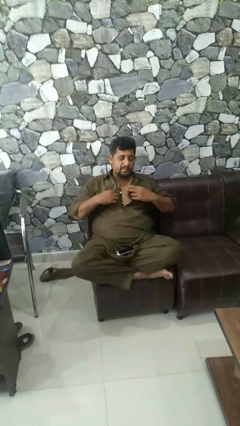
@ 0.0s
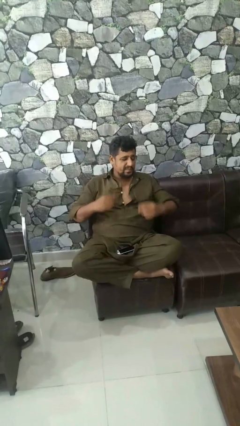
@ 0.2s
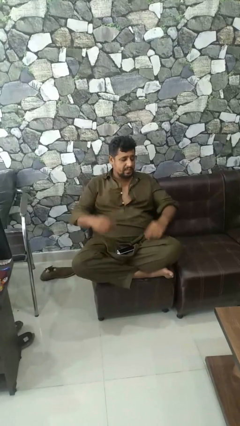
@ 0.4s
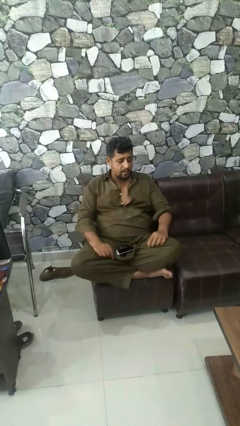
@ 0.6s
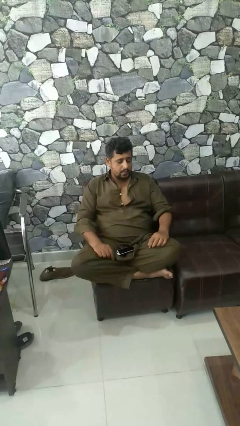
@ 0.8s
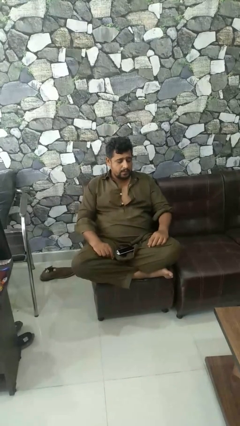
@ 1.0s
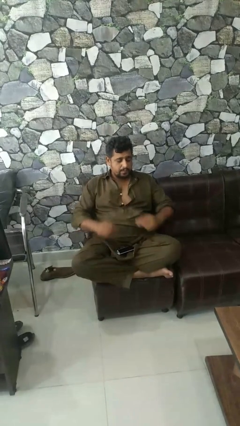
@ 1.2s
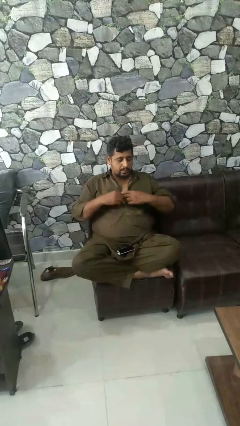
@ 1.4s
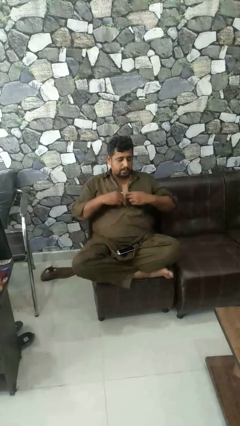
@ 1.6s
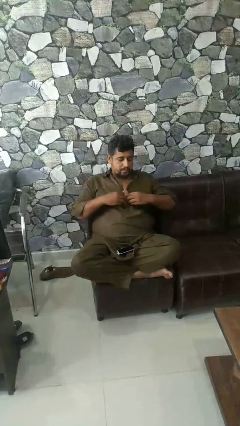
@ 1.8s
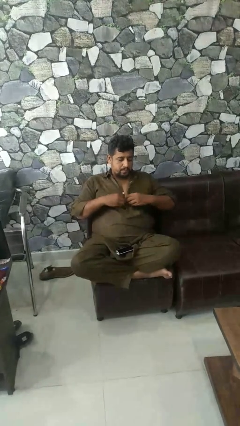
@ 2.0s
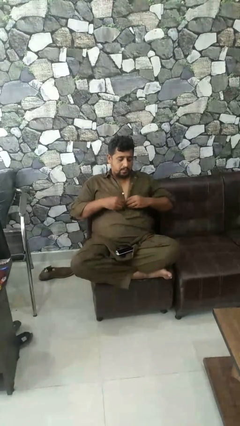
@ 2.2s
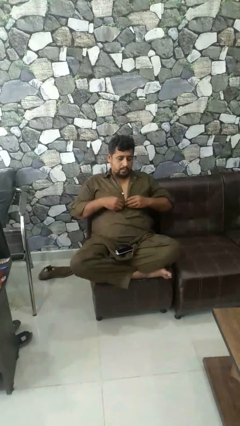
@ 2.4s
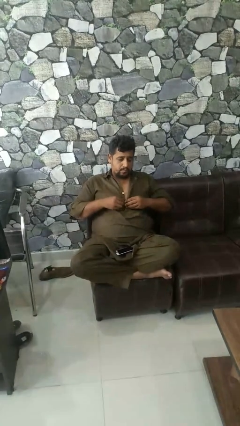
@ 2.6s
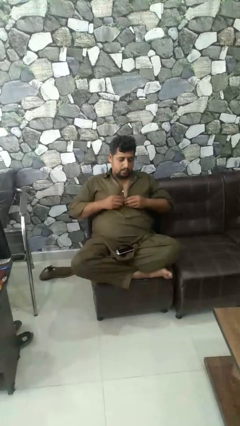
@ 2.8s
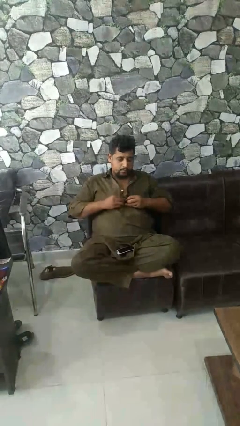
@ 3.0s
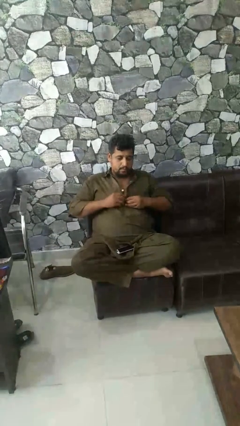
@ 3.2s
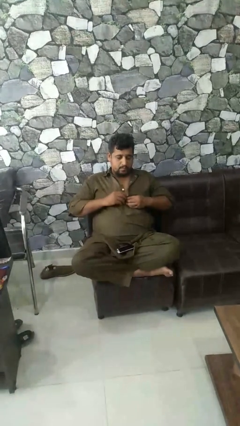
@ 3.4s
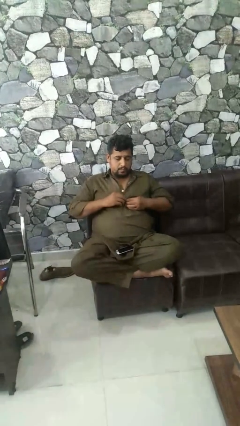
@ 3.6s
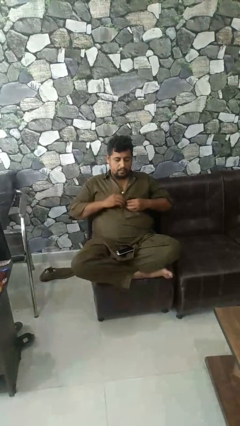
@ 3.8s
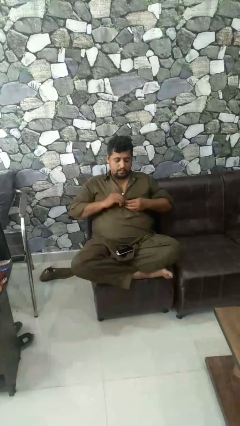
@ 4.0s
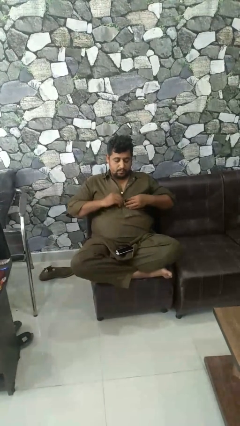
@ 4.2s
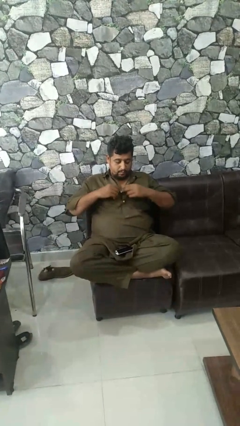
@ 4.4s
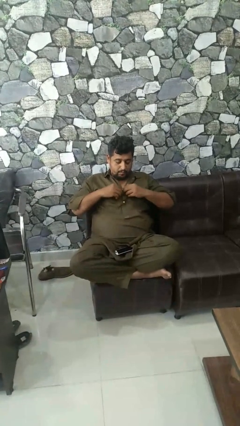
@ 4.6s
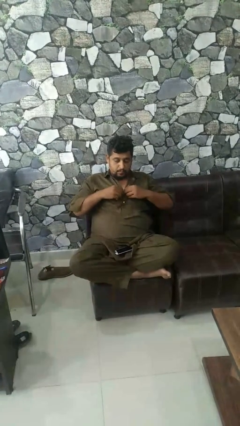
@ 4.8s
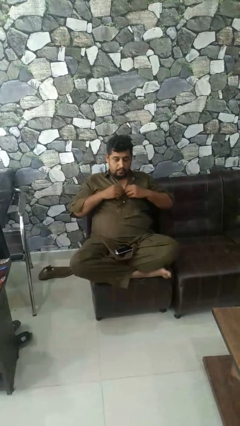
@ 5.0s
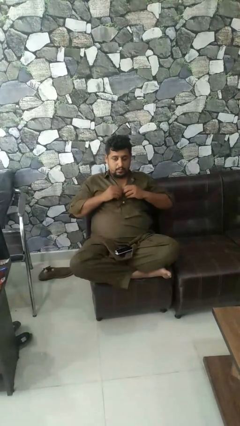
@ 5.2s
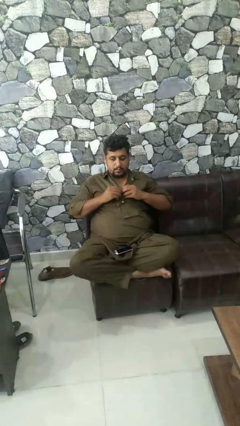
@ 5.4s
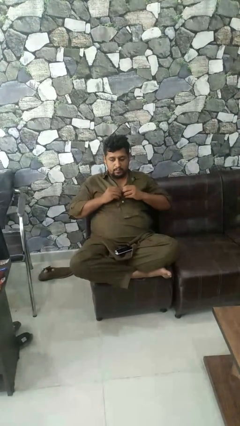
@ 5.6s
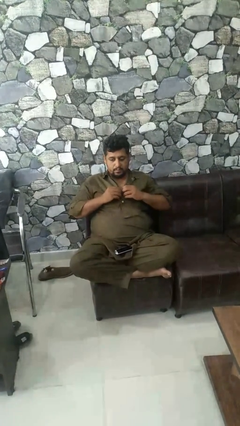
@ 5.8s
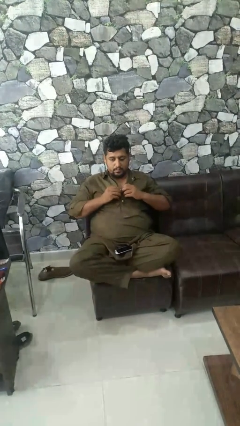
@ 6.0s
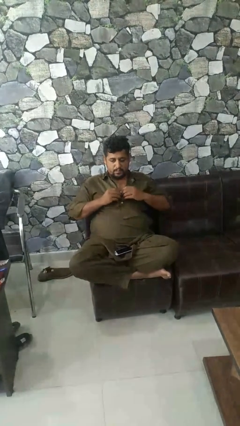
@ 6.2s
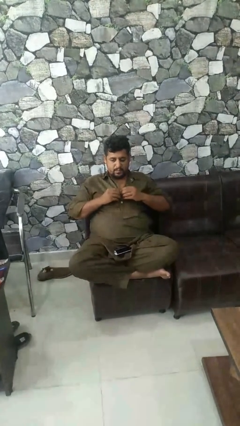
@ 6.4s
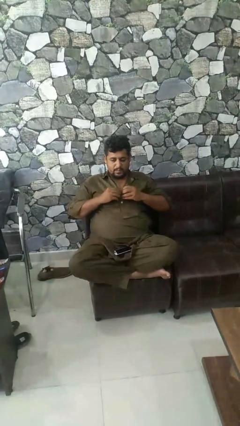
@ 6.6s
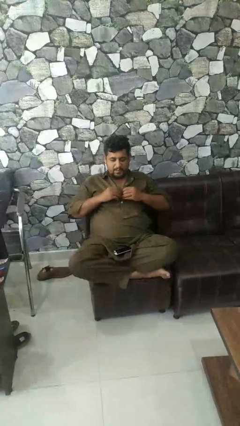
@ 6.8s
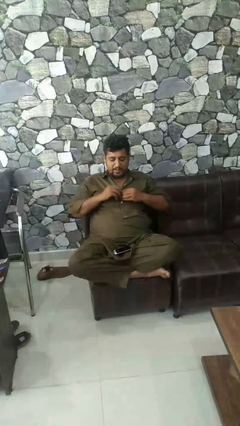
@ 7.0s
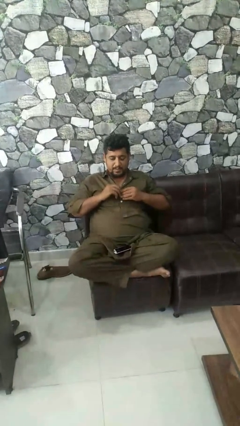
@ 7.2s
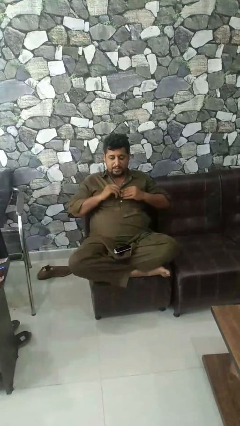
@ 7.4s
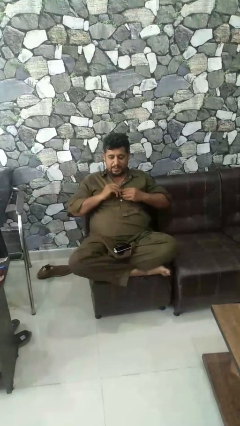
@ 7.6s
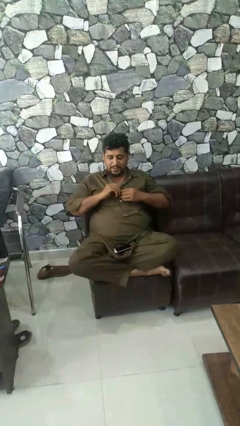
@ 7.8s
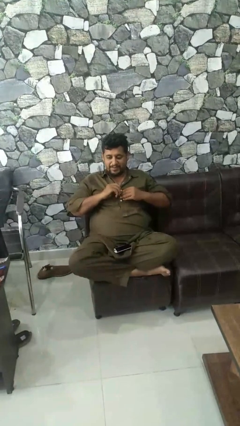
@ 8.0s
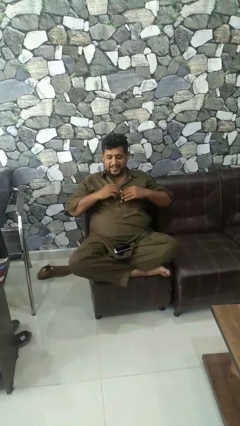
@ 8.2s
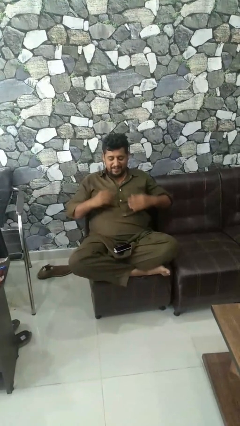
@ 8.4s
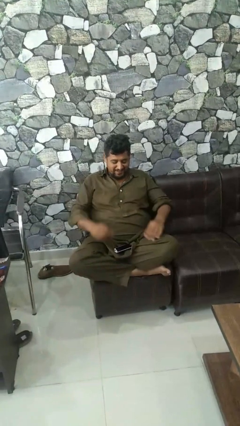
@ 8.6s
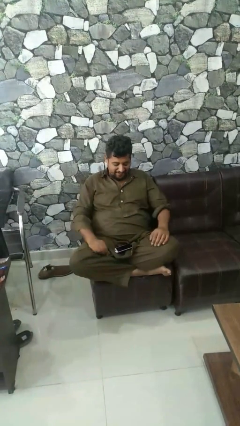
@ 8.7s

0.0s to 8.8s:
person buttons shirt

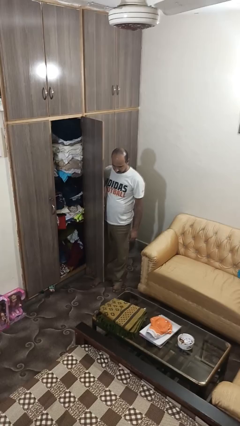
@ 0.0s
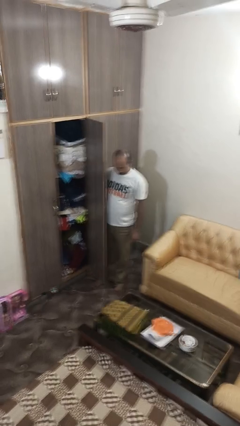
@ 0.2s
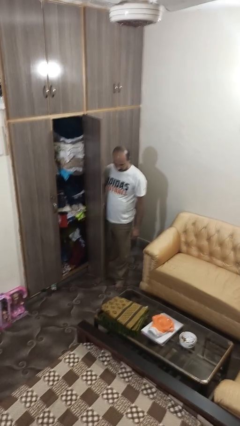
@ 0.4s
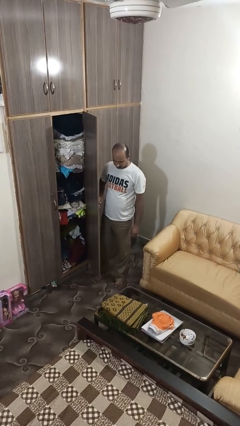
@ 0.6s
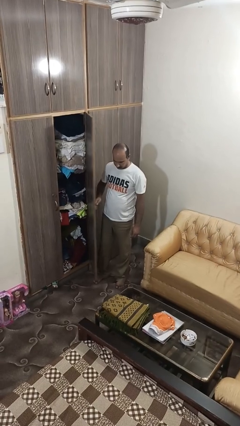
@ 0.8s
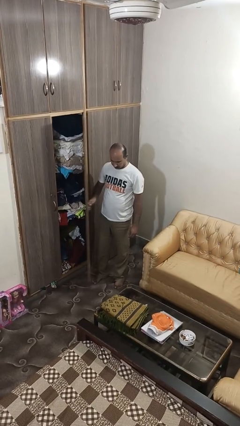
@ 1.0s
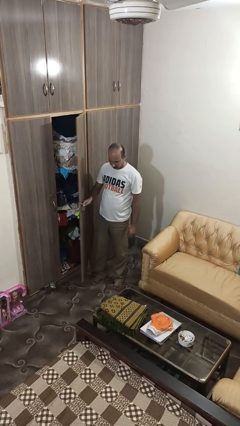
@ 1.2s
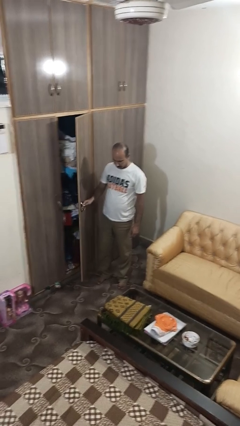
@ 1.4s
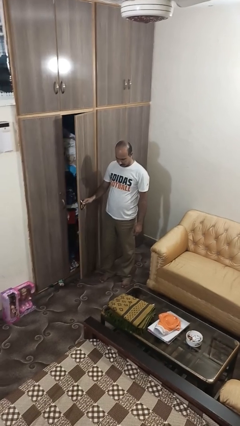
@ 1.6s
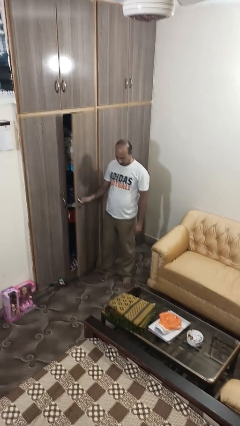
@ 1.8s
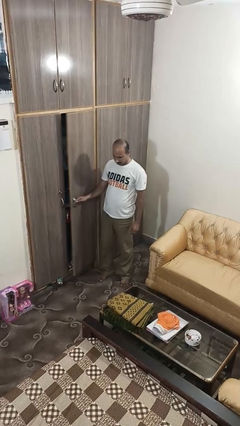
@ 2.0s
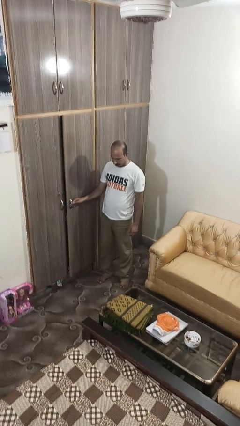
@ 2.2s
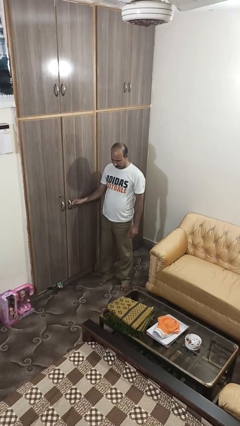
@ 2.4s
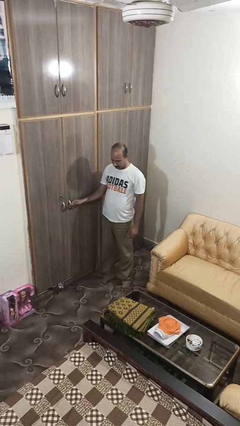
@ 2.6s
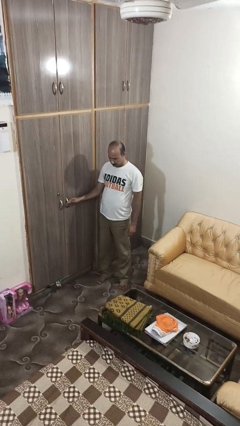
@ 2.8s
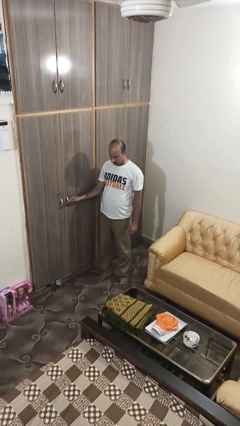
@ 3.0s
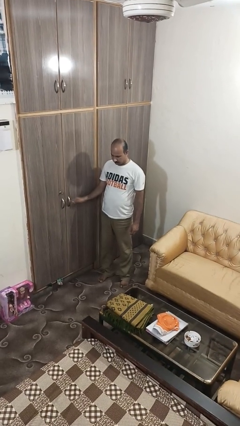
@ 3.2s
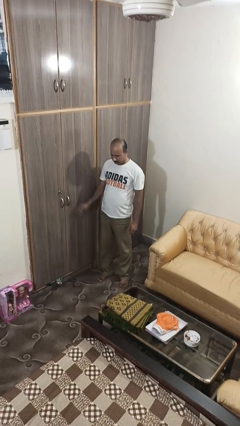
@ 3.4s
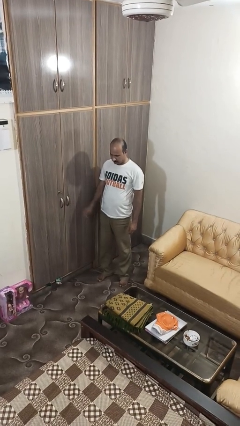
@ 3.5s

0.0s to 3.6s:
person closes closet door

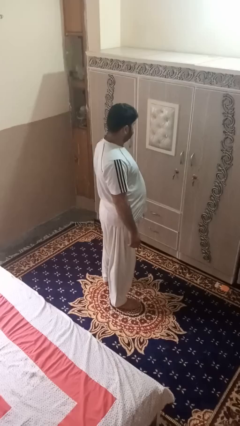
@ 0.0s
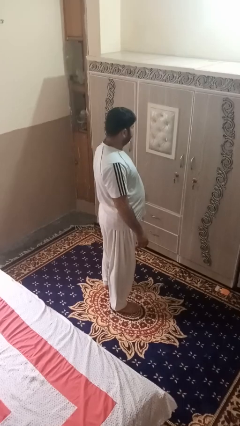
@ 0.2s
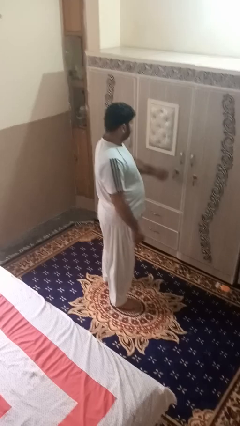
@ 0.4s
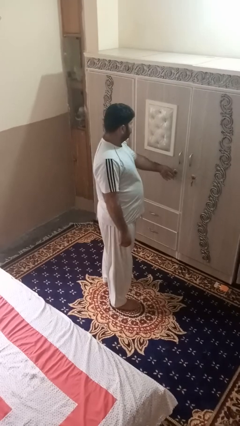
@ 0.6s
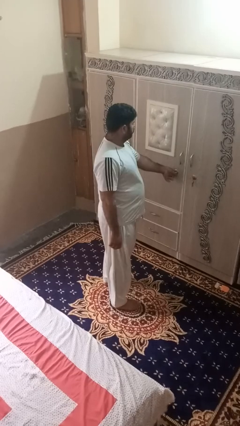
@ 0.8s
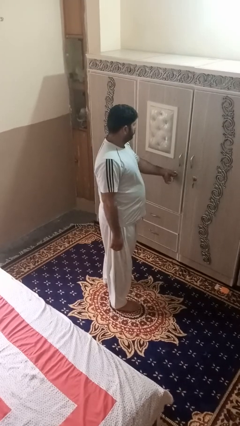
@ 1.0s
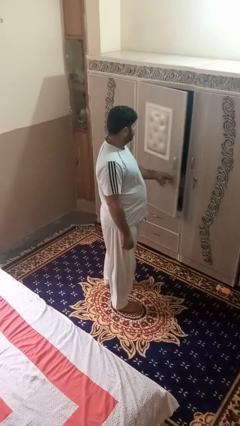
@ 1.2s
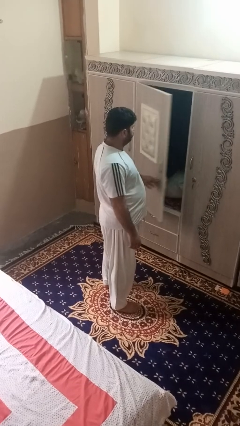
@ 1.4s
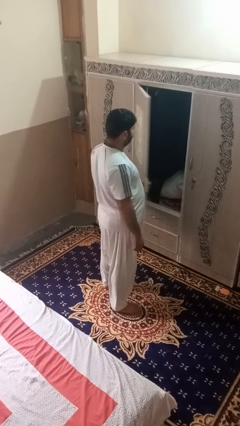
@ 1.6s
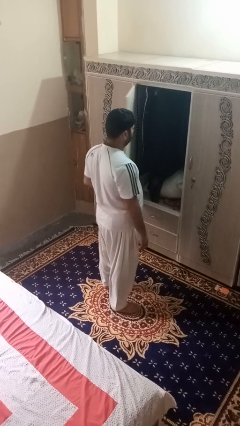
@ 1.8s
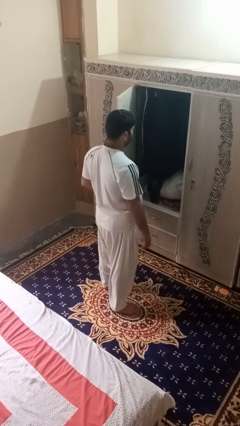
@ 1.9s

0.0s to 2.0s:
person opens dresser drawer

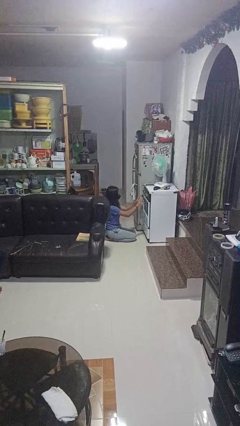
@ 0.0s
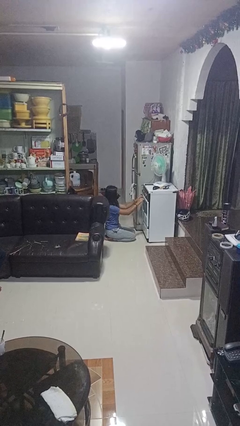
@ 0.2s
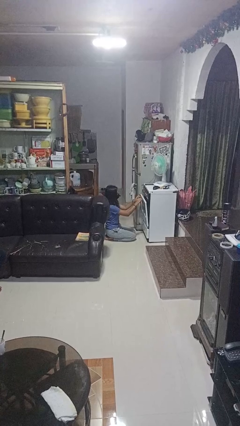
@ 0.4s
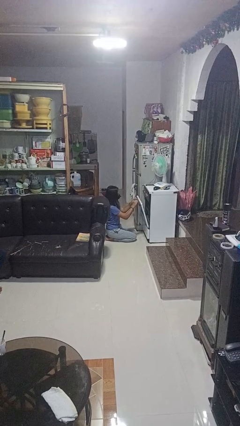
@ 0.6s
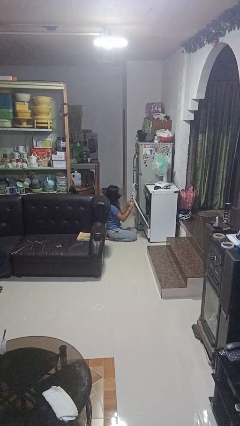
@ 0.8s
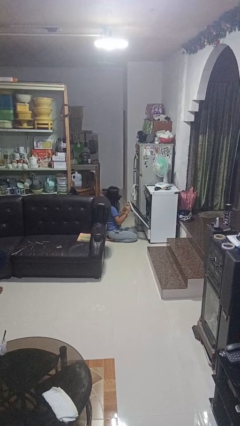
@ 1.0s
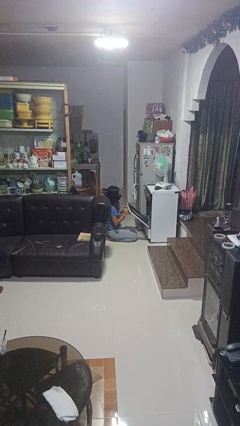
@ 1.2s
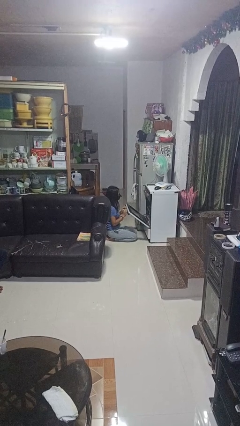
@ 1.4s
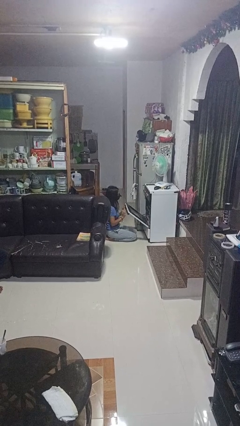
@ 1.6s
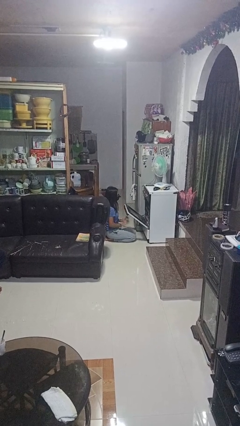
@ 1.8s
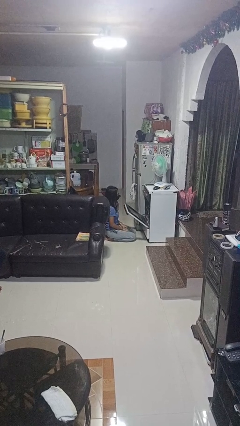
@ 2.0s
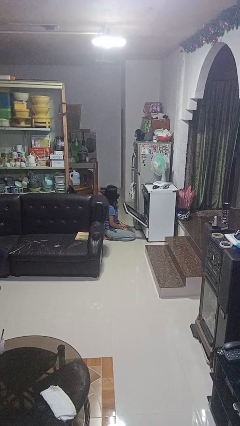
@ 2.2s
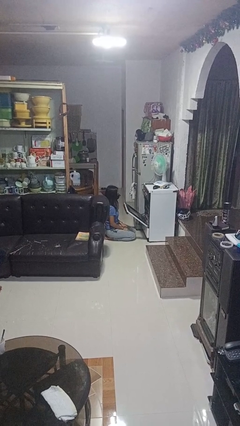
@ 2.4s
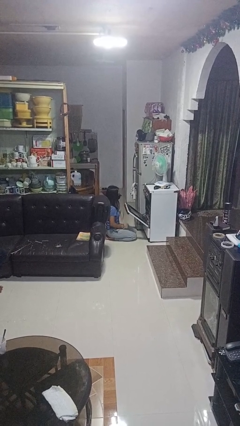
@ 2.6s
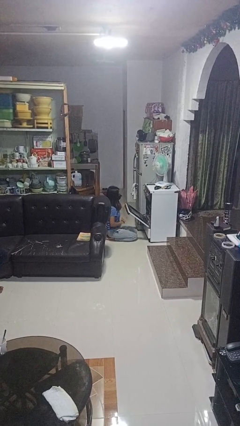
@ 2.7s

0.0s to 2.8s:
person opens oven door

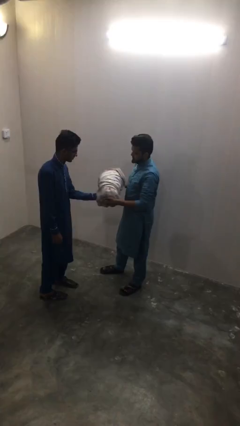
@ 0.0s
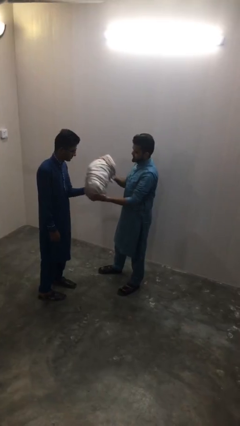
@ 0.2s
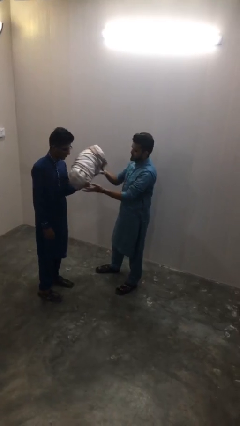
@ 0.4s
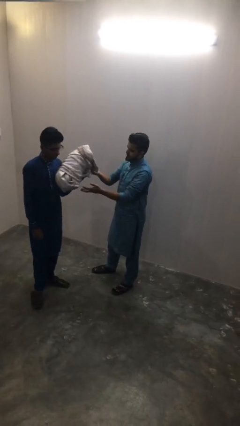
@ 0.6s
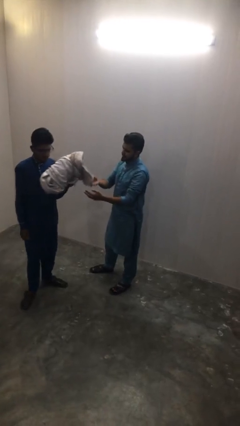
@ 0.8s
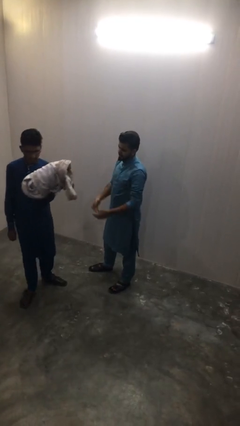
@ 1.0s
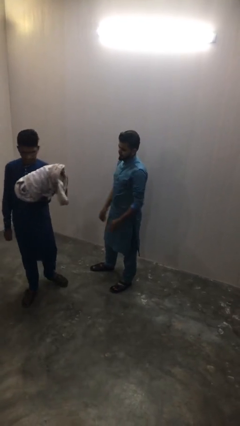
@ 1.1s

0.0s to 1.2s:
person transfers object to person
